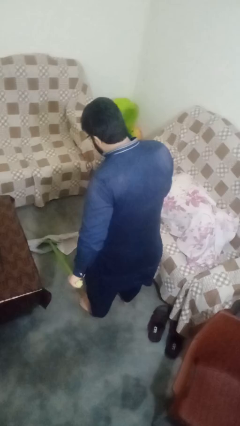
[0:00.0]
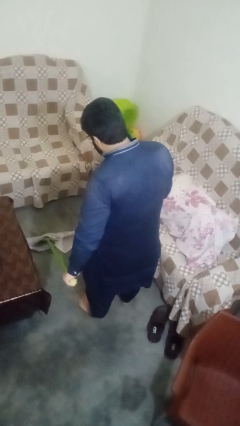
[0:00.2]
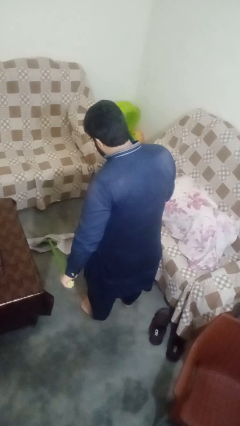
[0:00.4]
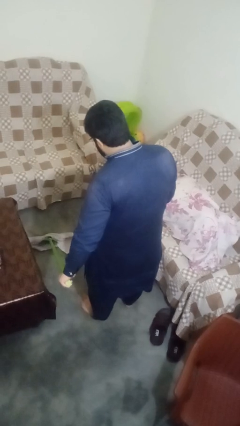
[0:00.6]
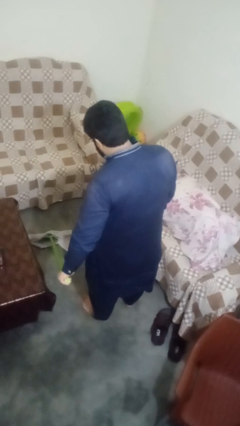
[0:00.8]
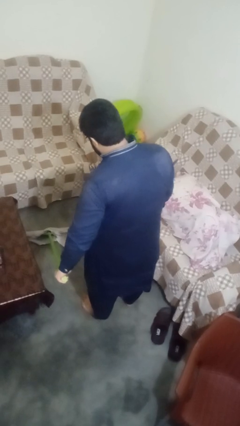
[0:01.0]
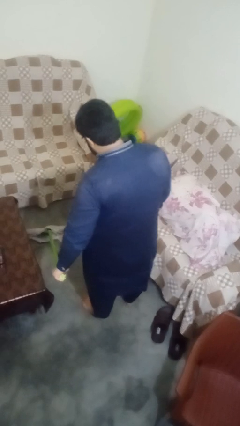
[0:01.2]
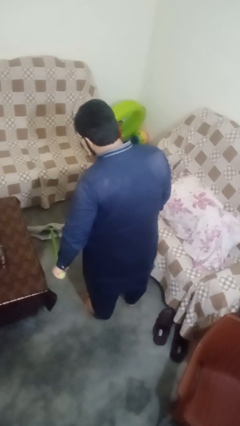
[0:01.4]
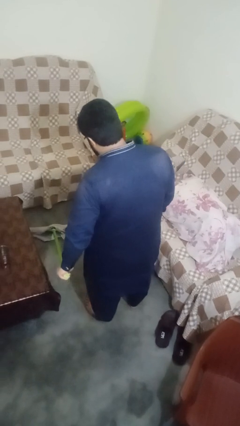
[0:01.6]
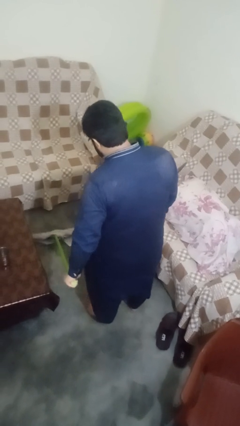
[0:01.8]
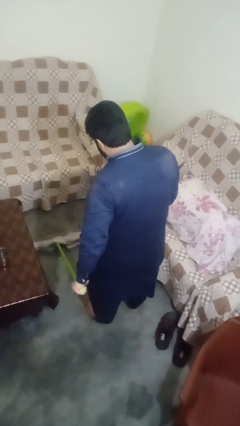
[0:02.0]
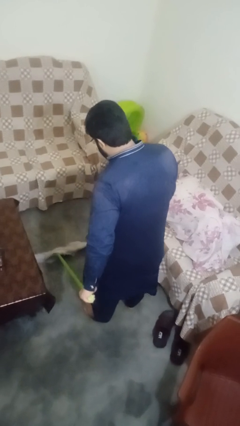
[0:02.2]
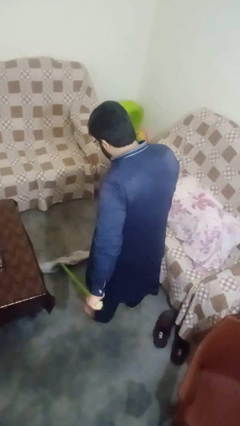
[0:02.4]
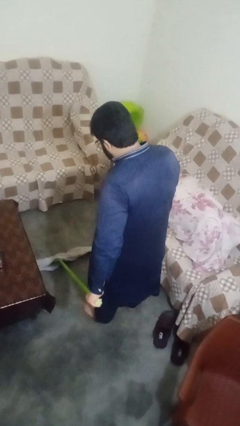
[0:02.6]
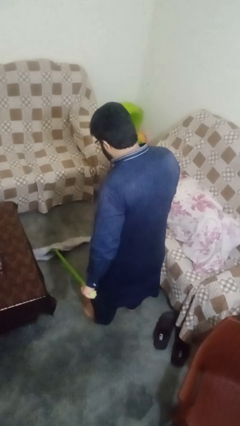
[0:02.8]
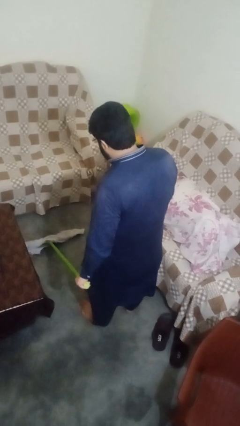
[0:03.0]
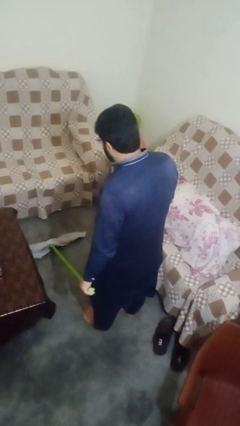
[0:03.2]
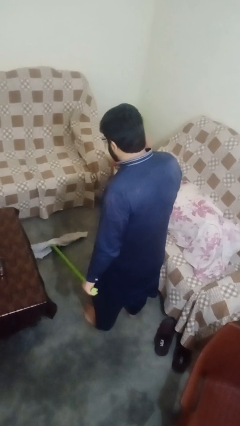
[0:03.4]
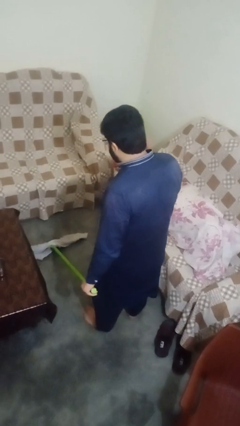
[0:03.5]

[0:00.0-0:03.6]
person mops

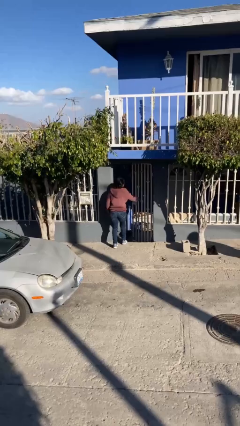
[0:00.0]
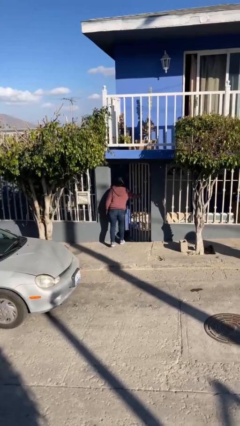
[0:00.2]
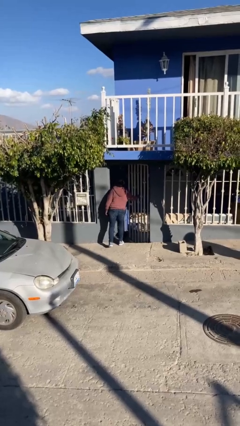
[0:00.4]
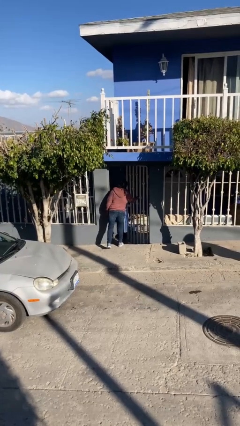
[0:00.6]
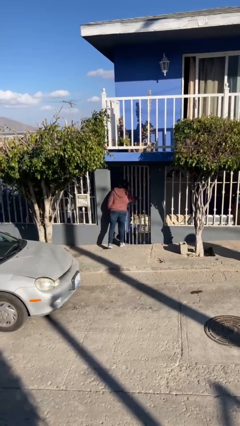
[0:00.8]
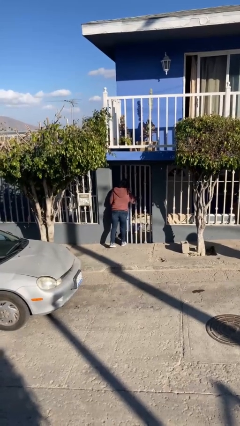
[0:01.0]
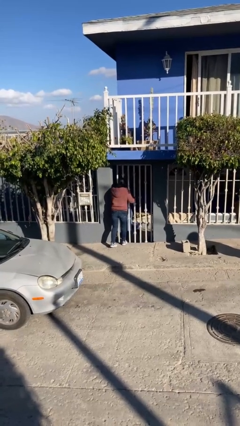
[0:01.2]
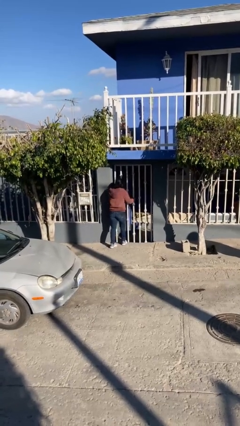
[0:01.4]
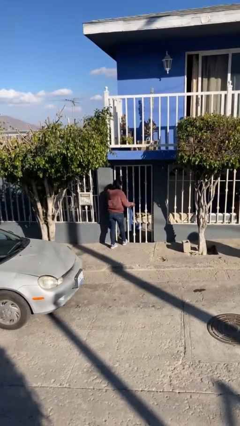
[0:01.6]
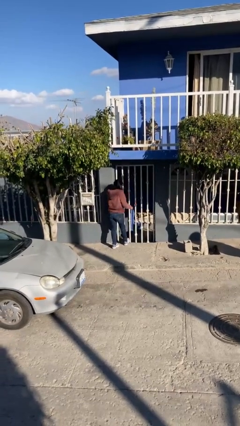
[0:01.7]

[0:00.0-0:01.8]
person closes facility door

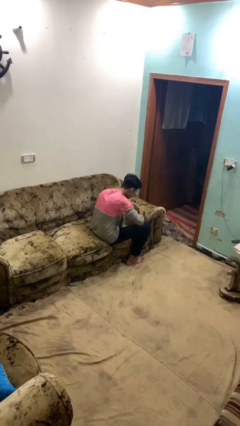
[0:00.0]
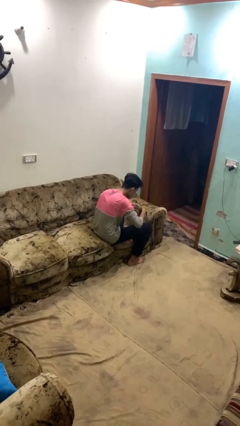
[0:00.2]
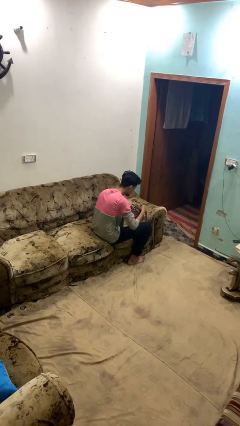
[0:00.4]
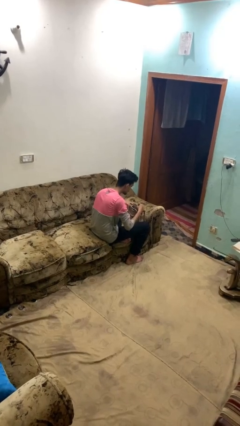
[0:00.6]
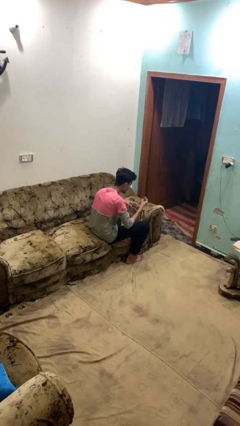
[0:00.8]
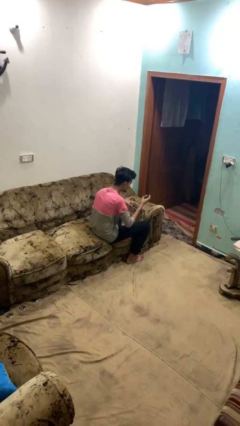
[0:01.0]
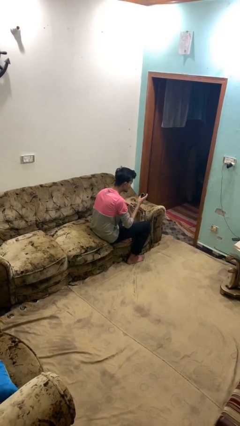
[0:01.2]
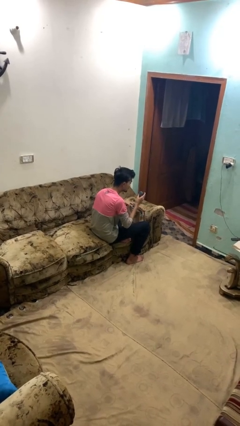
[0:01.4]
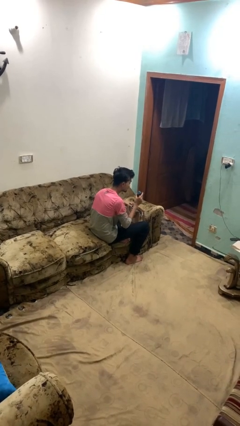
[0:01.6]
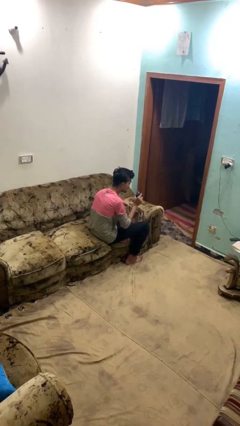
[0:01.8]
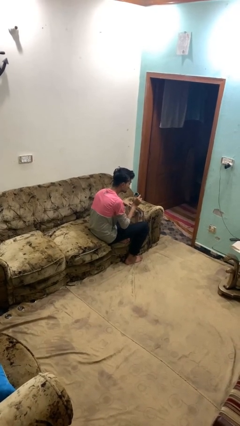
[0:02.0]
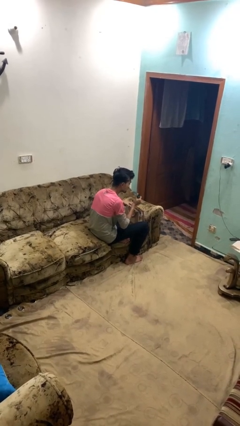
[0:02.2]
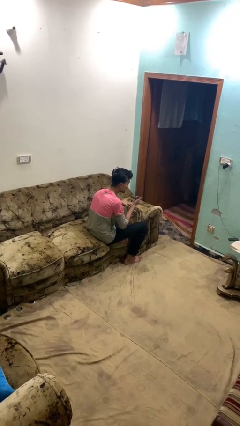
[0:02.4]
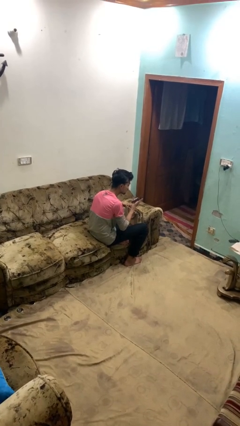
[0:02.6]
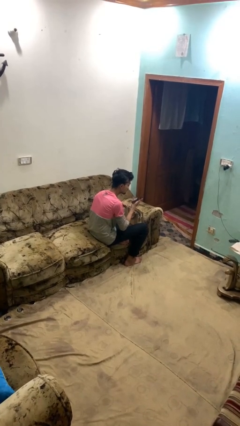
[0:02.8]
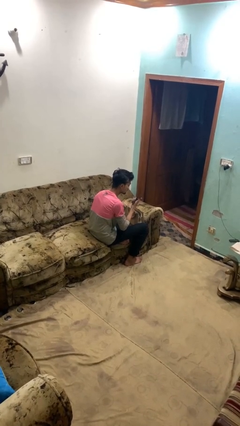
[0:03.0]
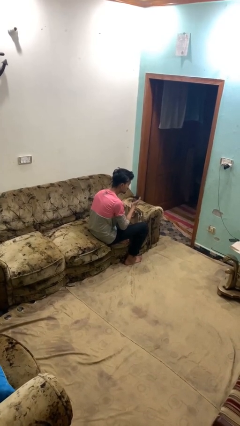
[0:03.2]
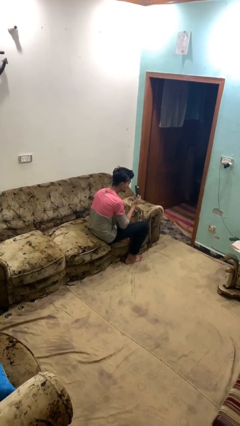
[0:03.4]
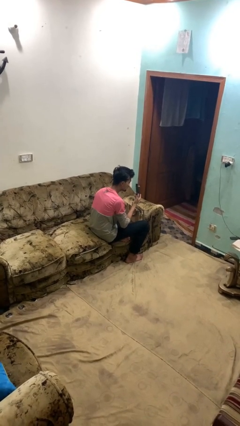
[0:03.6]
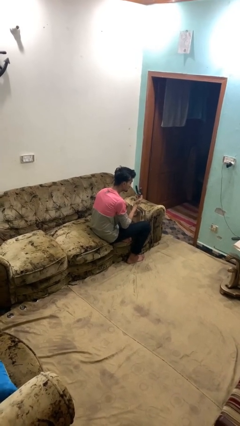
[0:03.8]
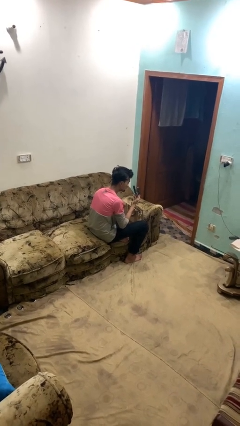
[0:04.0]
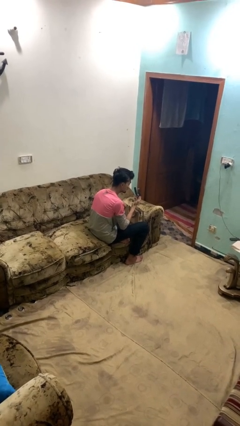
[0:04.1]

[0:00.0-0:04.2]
person takes object from purse

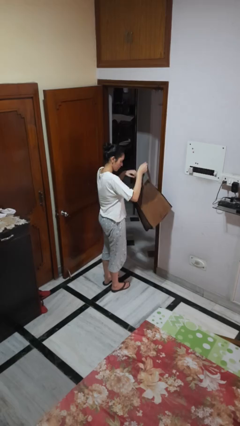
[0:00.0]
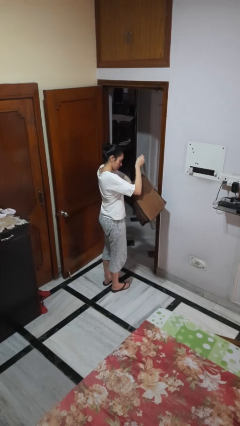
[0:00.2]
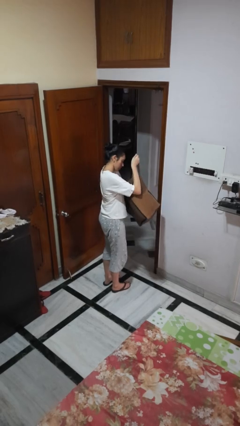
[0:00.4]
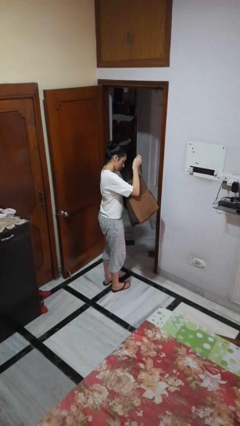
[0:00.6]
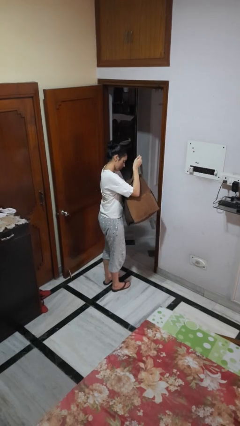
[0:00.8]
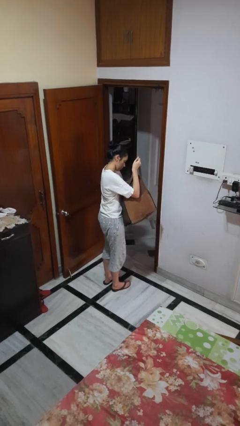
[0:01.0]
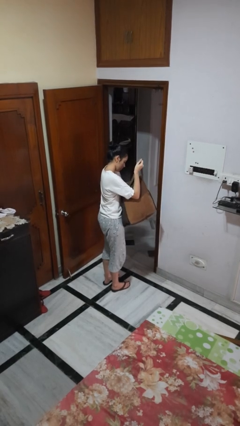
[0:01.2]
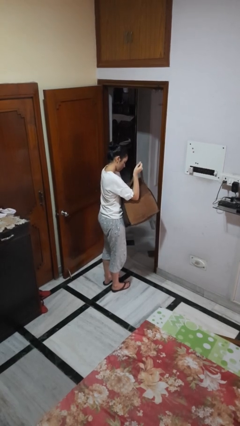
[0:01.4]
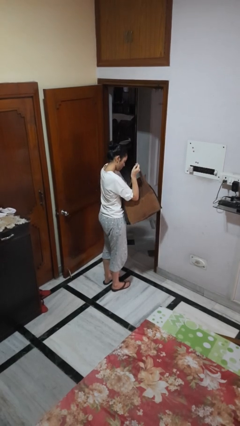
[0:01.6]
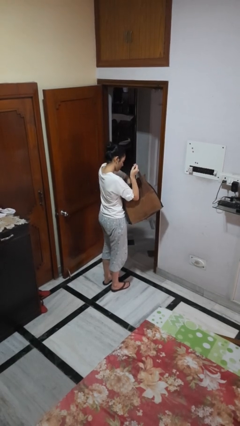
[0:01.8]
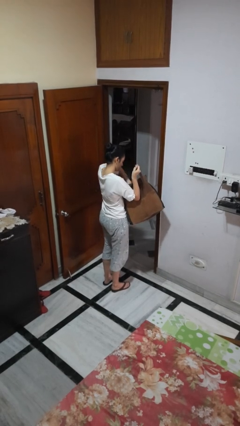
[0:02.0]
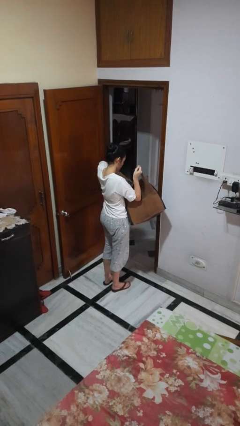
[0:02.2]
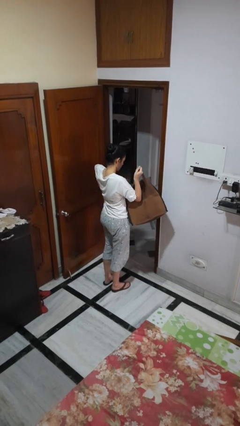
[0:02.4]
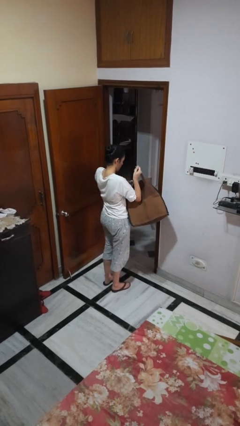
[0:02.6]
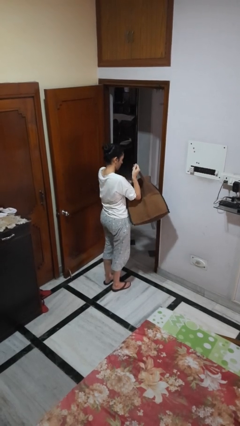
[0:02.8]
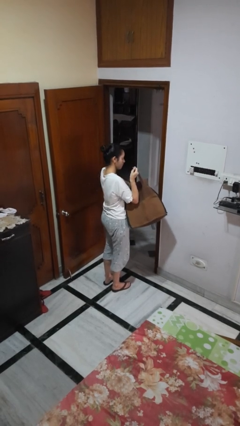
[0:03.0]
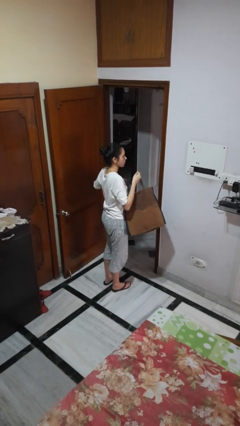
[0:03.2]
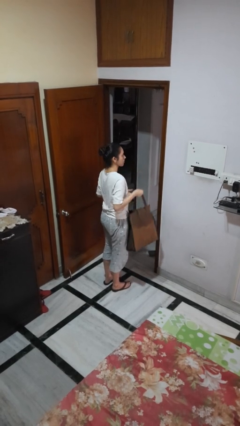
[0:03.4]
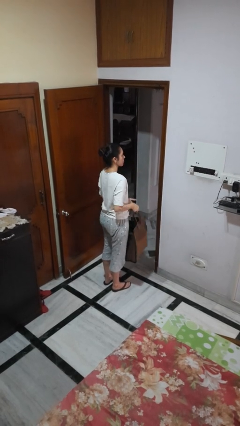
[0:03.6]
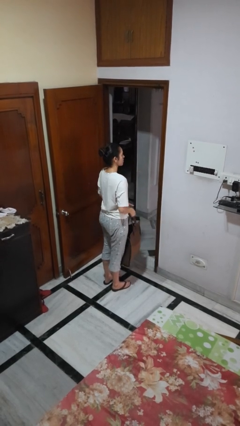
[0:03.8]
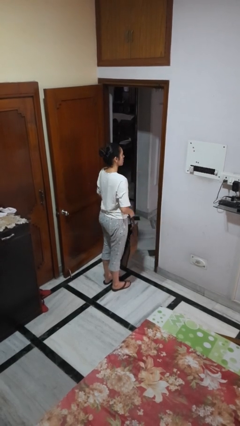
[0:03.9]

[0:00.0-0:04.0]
person searches in bag

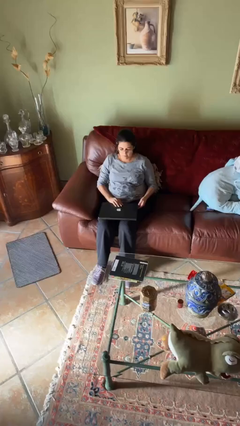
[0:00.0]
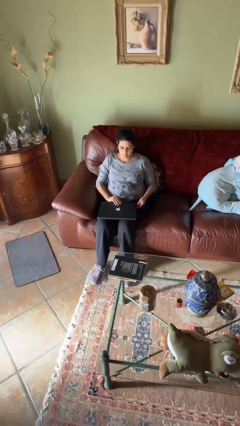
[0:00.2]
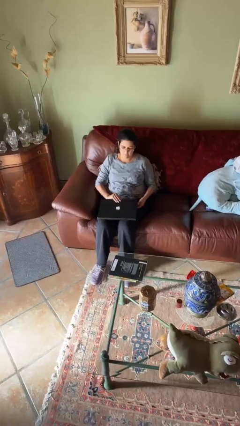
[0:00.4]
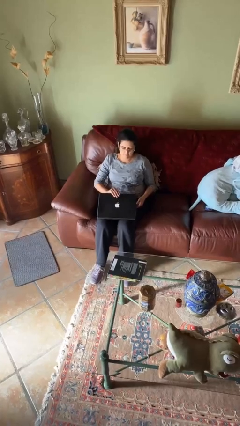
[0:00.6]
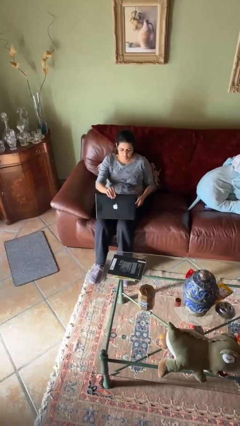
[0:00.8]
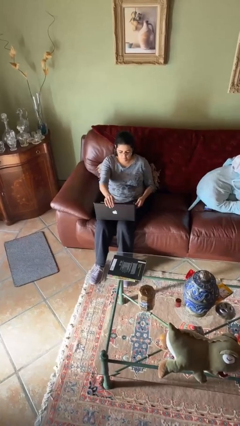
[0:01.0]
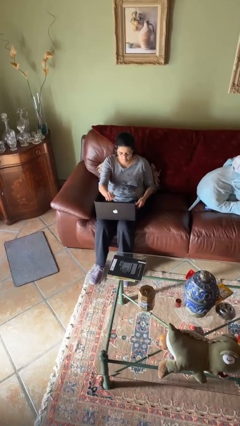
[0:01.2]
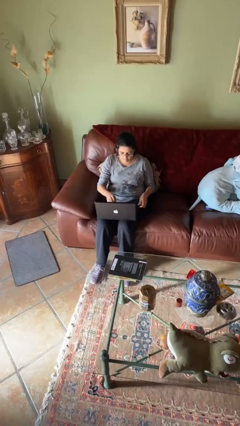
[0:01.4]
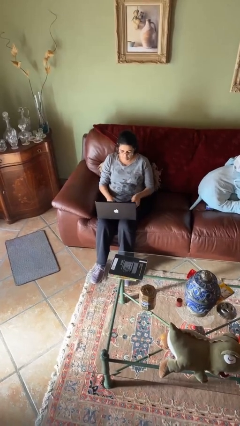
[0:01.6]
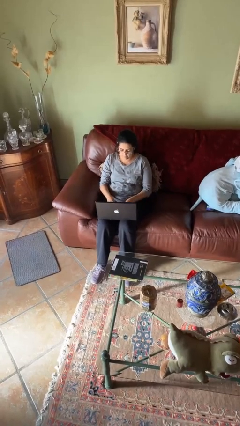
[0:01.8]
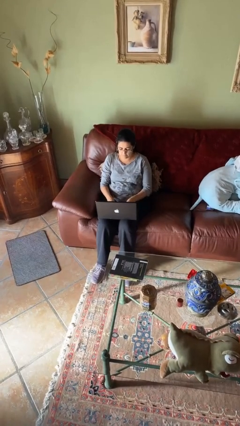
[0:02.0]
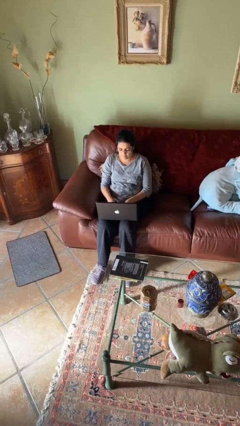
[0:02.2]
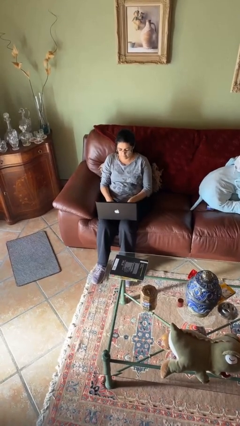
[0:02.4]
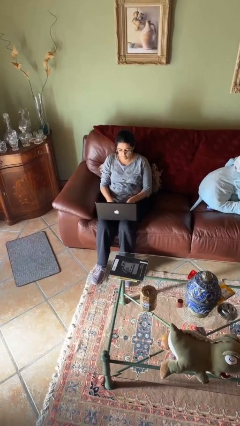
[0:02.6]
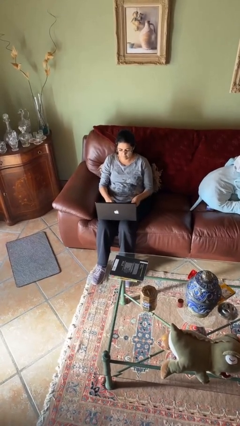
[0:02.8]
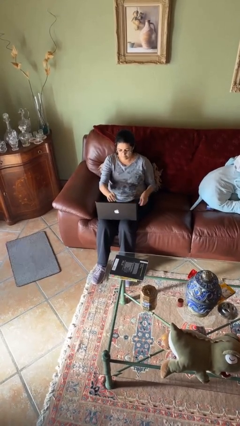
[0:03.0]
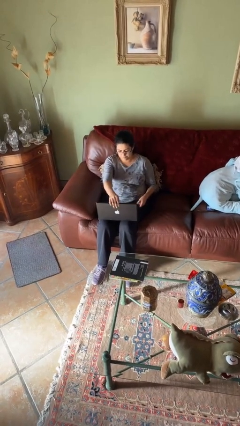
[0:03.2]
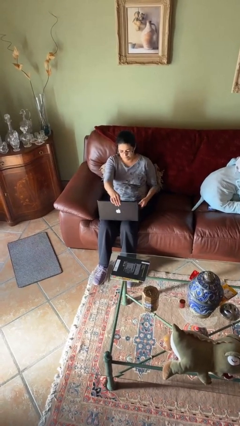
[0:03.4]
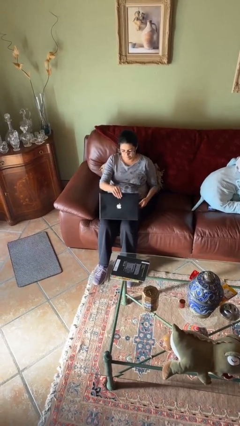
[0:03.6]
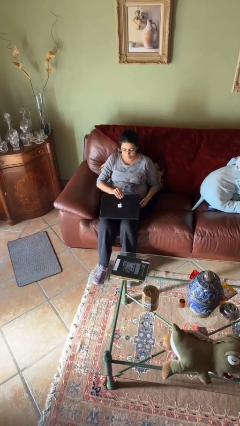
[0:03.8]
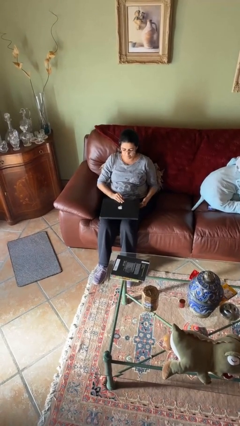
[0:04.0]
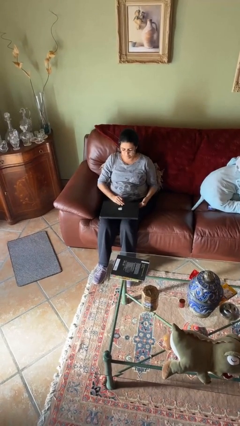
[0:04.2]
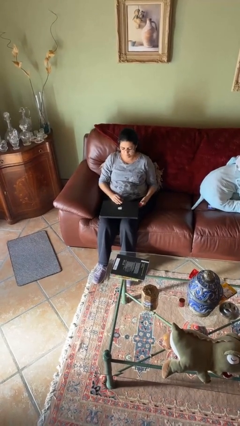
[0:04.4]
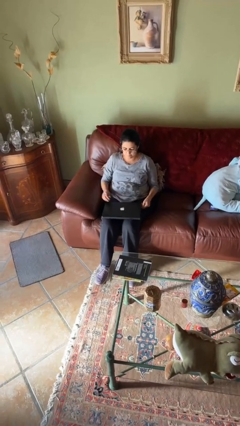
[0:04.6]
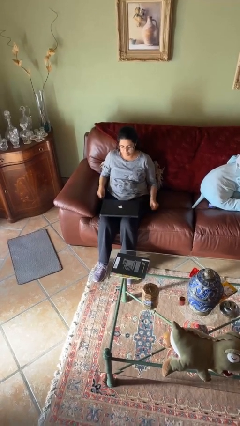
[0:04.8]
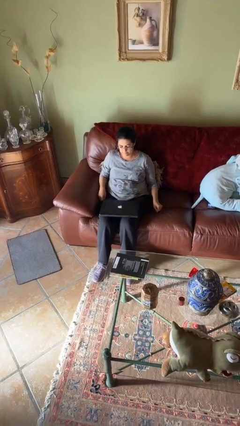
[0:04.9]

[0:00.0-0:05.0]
person interacts with laptop
